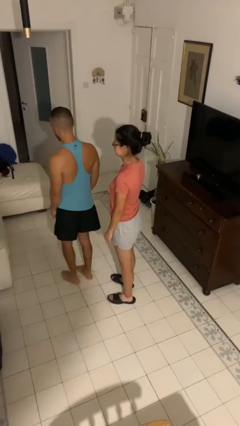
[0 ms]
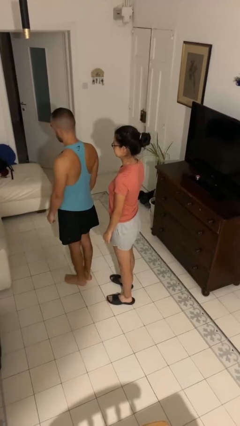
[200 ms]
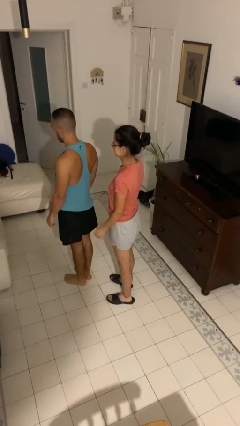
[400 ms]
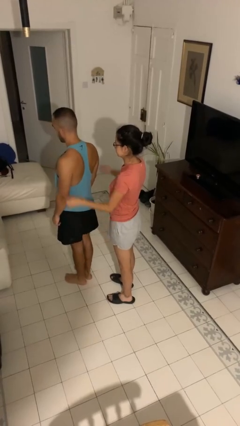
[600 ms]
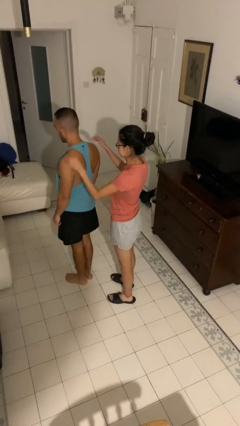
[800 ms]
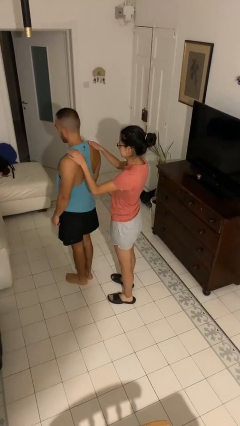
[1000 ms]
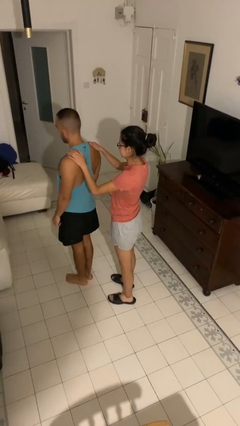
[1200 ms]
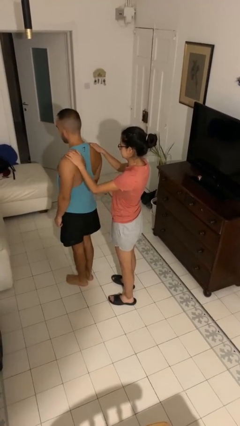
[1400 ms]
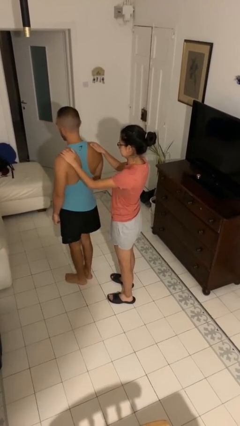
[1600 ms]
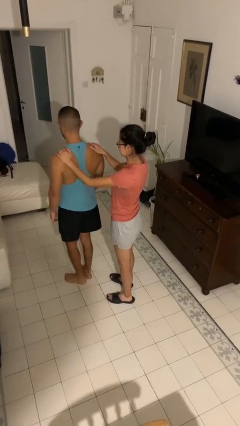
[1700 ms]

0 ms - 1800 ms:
person grabs person by shoulder

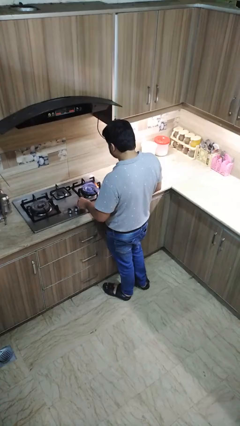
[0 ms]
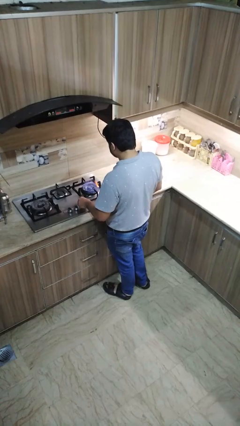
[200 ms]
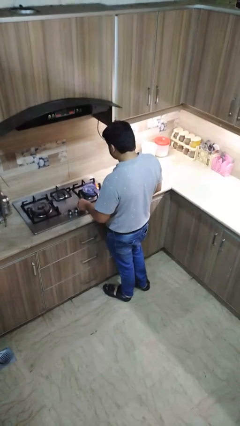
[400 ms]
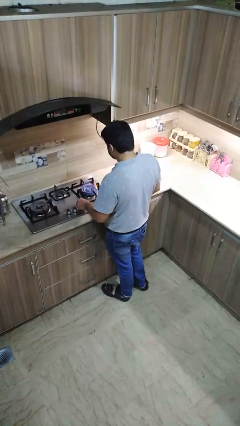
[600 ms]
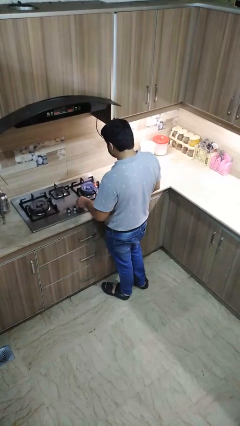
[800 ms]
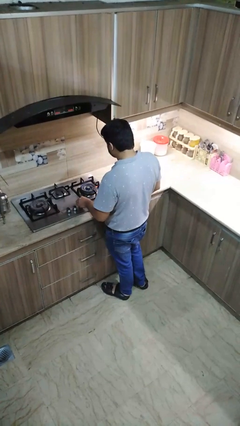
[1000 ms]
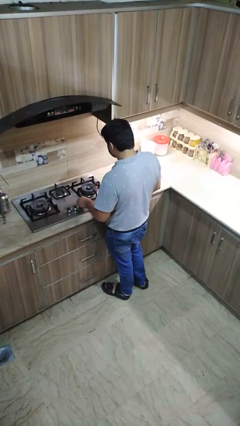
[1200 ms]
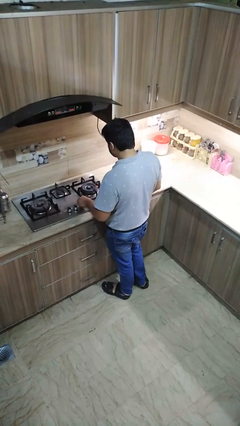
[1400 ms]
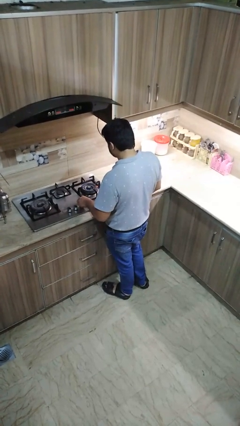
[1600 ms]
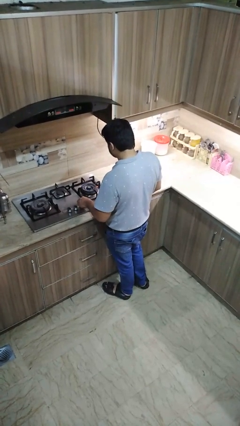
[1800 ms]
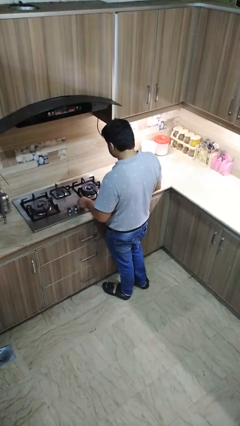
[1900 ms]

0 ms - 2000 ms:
person turns off stovetop

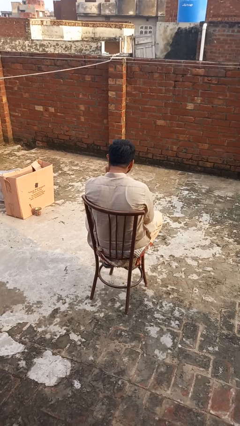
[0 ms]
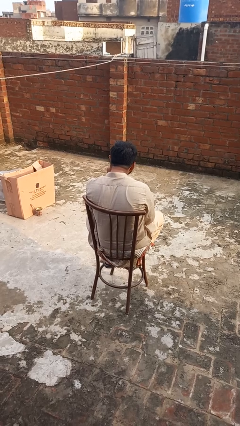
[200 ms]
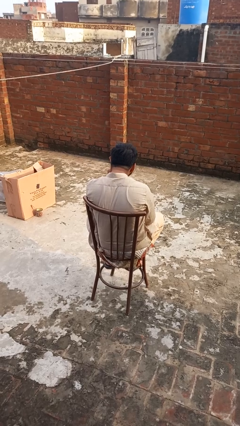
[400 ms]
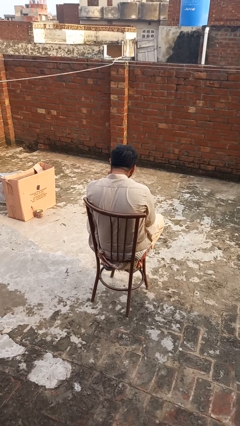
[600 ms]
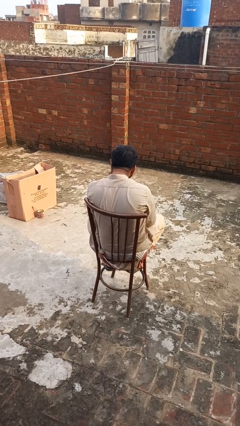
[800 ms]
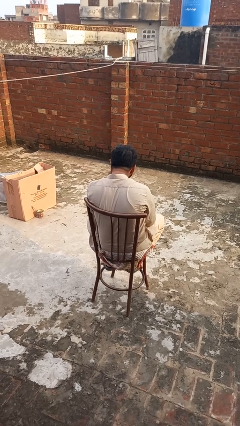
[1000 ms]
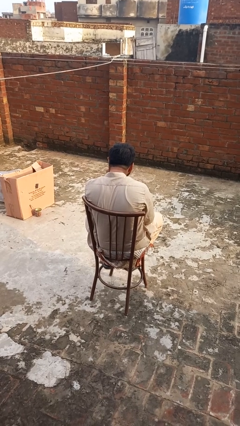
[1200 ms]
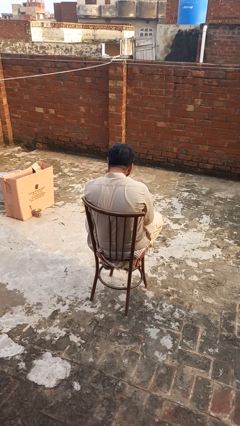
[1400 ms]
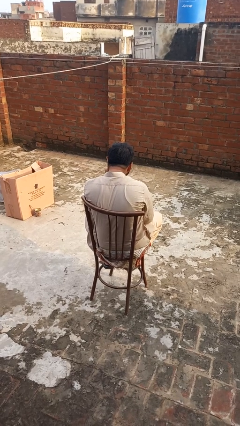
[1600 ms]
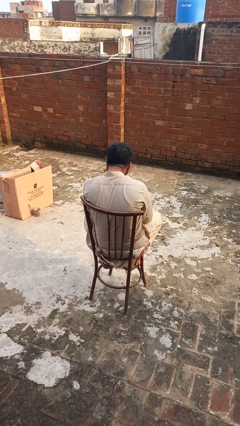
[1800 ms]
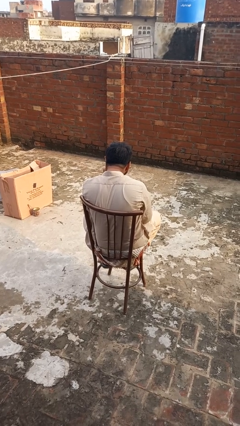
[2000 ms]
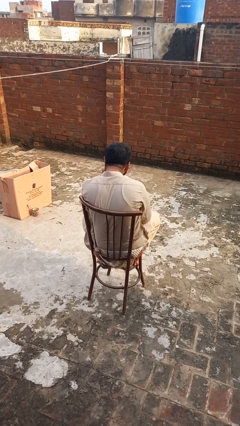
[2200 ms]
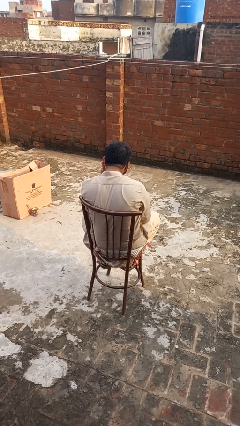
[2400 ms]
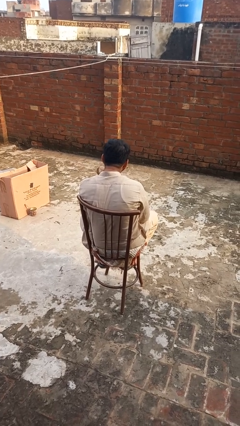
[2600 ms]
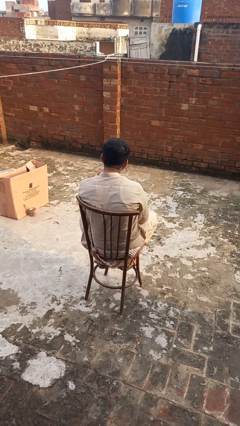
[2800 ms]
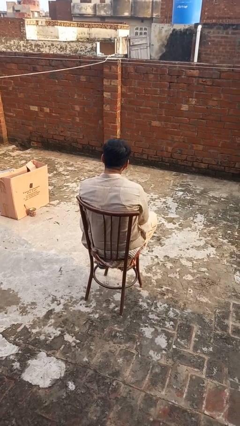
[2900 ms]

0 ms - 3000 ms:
person gestures listen closely

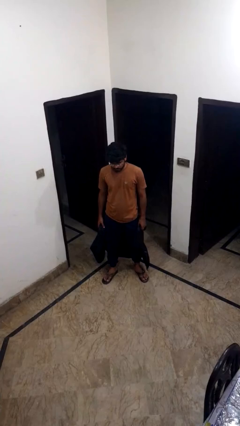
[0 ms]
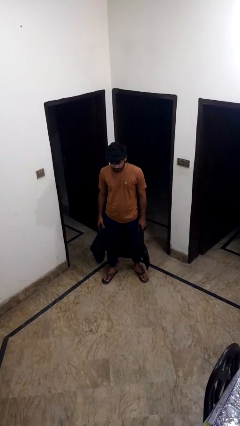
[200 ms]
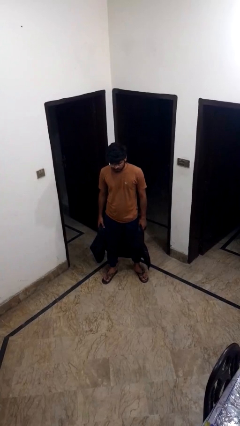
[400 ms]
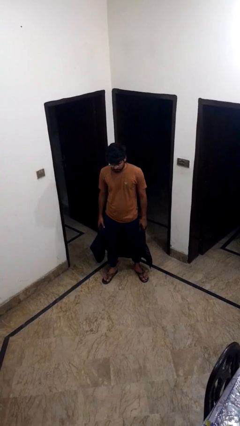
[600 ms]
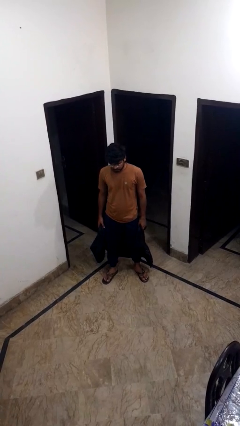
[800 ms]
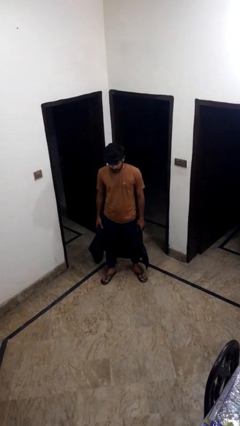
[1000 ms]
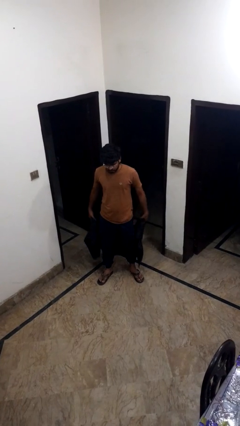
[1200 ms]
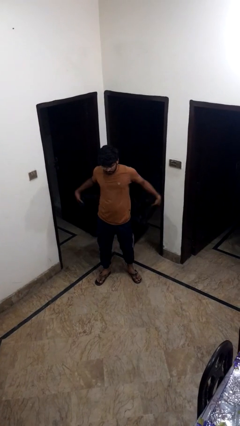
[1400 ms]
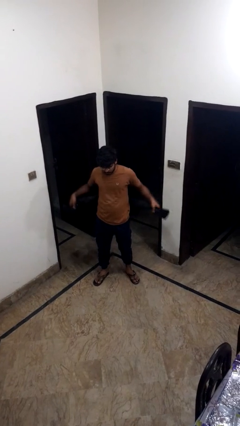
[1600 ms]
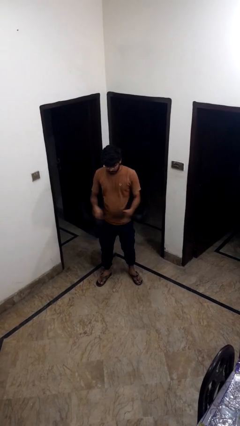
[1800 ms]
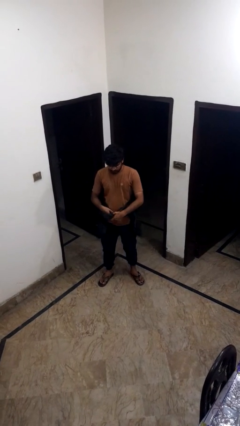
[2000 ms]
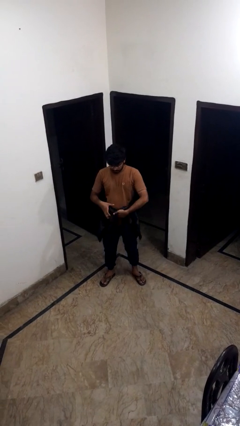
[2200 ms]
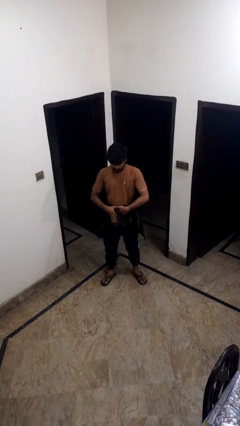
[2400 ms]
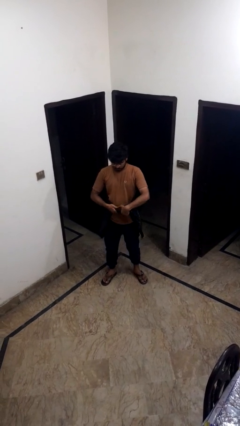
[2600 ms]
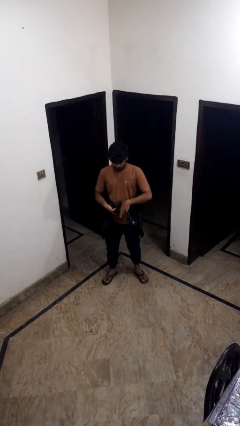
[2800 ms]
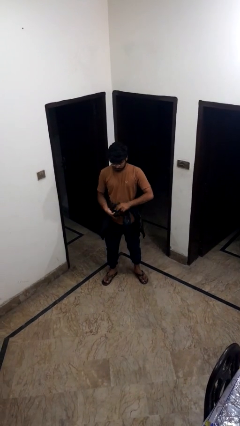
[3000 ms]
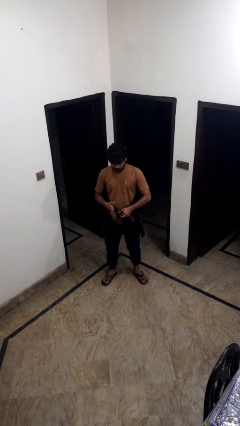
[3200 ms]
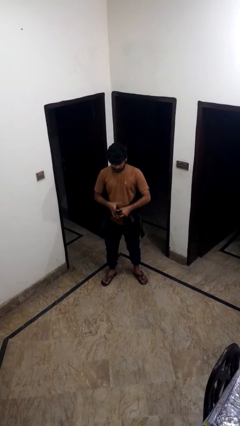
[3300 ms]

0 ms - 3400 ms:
person carries bicycle

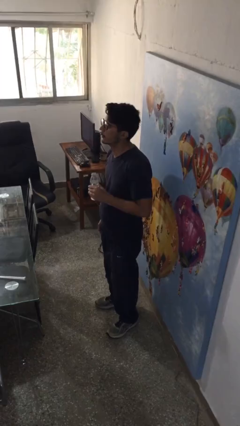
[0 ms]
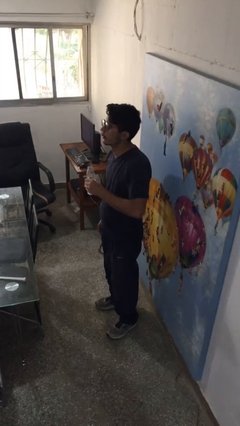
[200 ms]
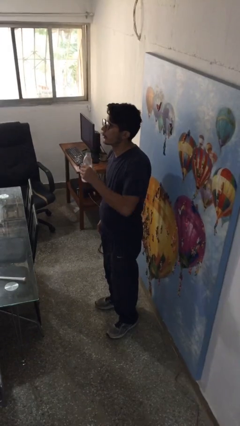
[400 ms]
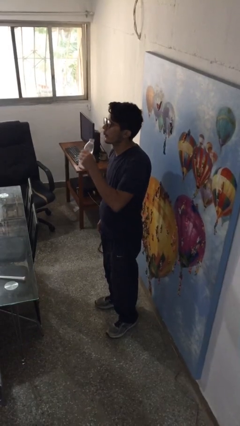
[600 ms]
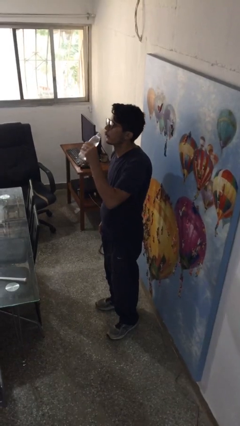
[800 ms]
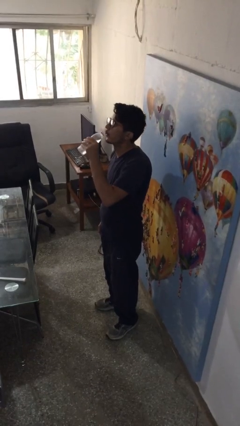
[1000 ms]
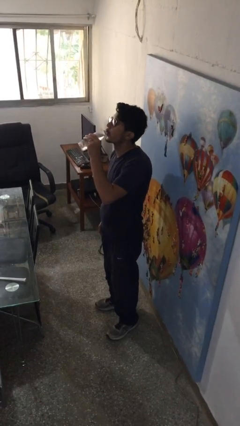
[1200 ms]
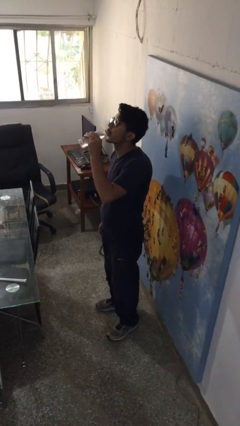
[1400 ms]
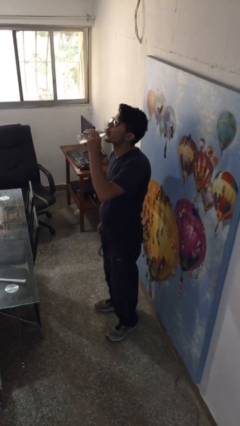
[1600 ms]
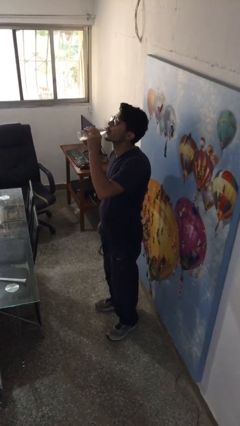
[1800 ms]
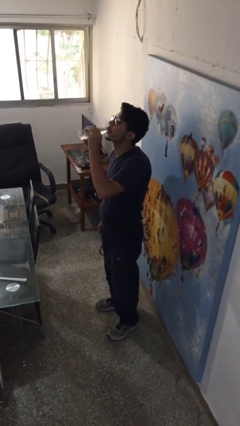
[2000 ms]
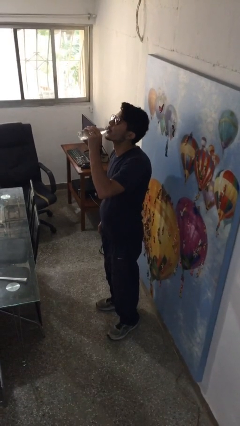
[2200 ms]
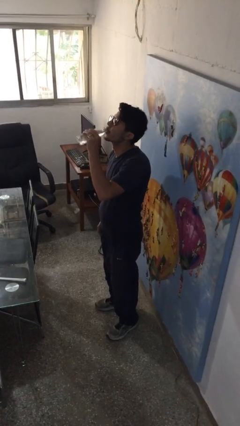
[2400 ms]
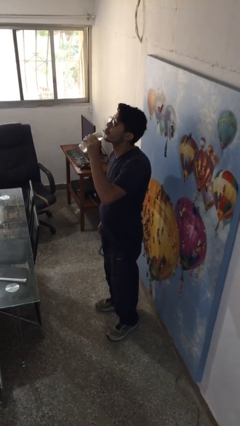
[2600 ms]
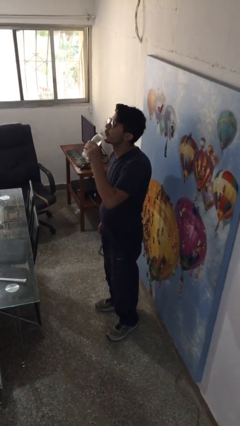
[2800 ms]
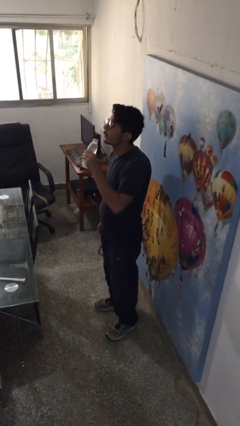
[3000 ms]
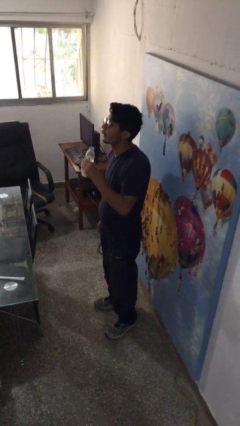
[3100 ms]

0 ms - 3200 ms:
person drinks from bottle

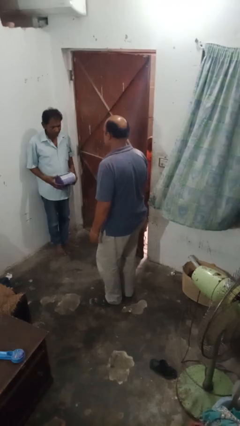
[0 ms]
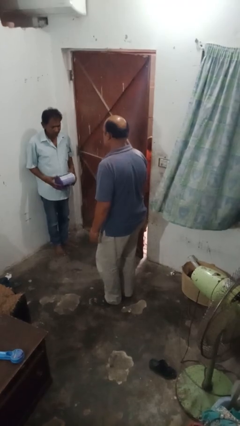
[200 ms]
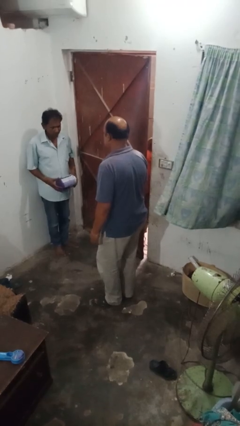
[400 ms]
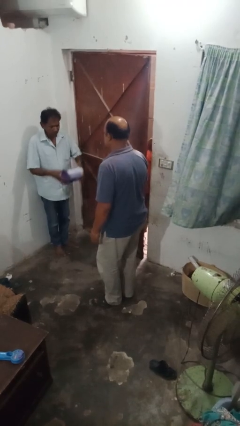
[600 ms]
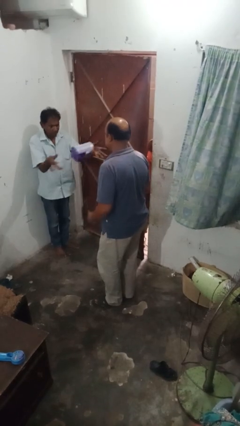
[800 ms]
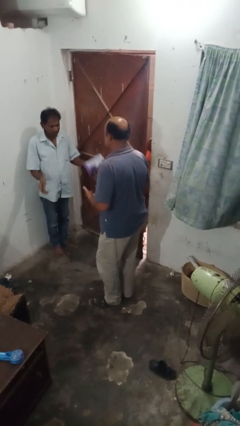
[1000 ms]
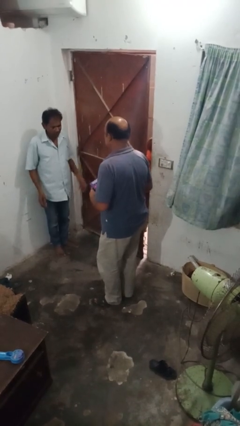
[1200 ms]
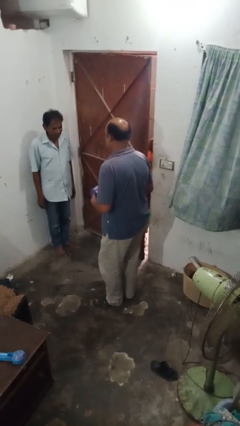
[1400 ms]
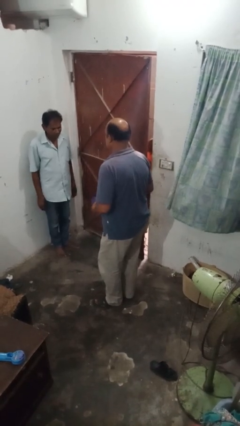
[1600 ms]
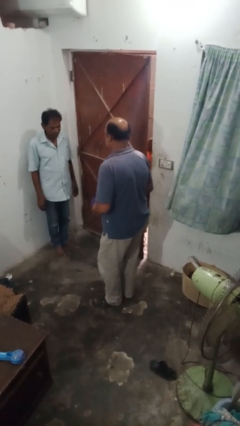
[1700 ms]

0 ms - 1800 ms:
person catches object from person

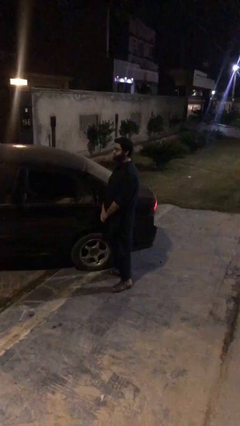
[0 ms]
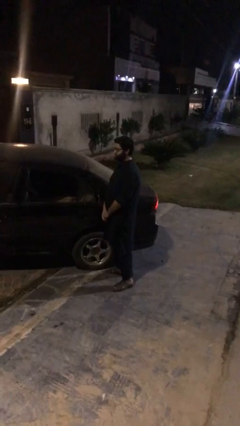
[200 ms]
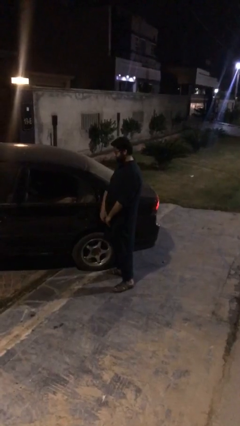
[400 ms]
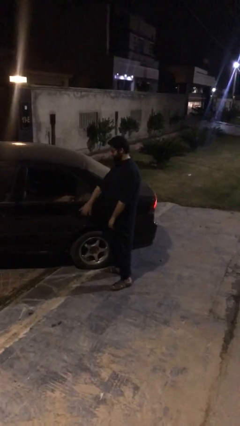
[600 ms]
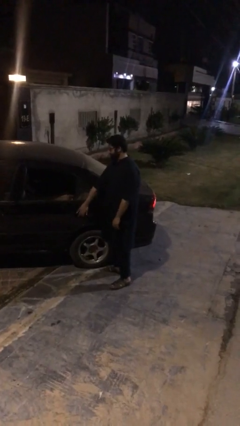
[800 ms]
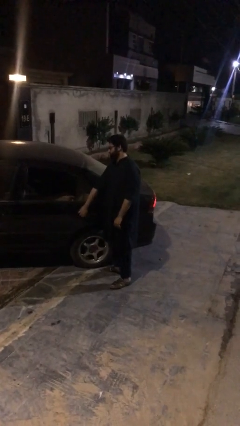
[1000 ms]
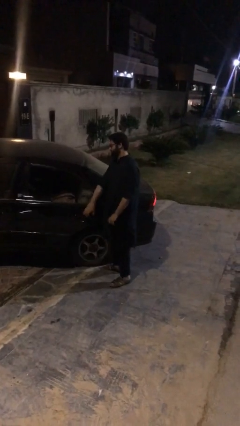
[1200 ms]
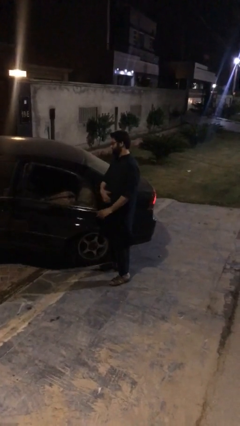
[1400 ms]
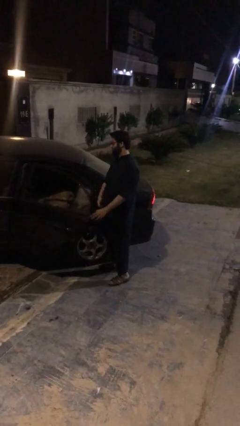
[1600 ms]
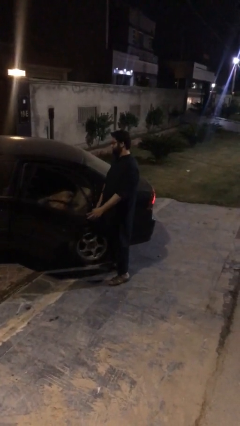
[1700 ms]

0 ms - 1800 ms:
person opens car door
